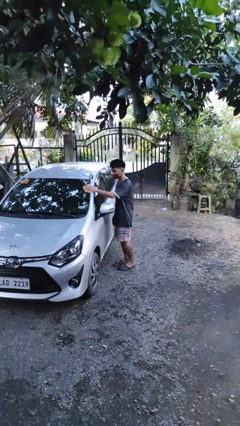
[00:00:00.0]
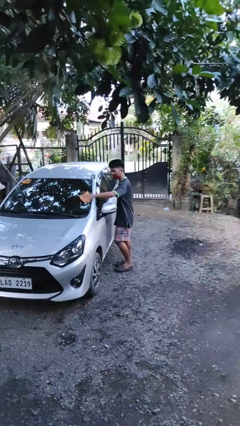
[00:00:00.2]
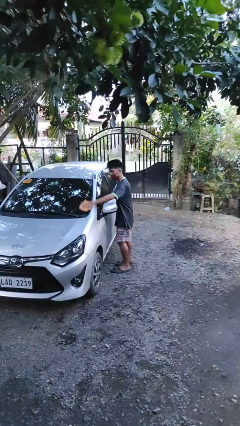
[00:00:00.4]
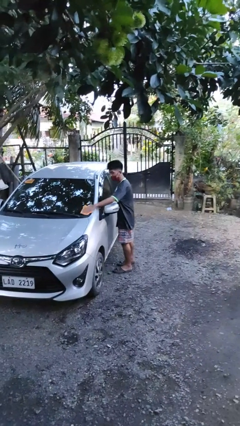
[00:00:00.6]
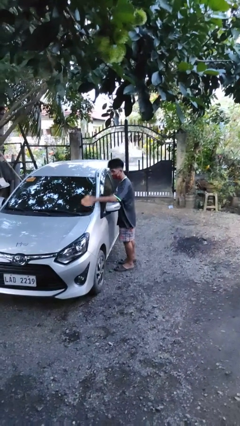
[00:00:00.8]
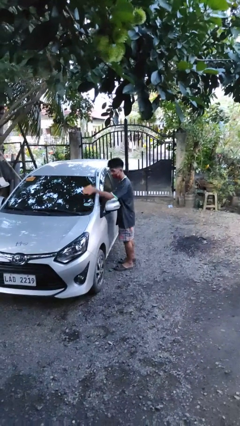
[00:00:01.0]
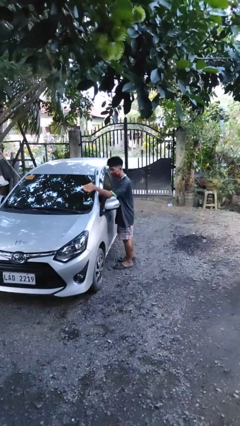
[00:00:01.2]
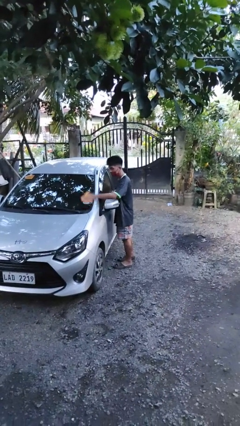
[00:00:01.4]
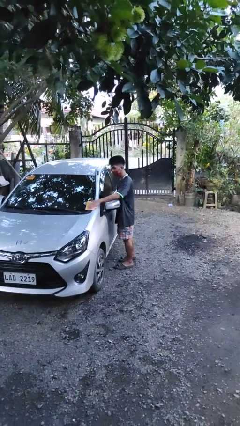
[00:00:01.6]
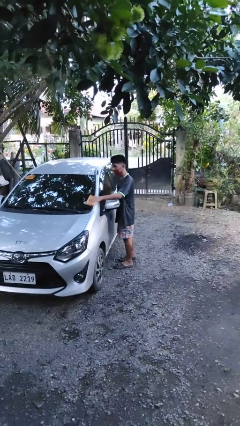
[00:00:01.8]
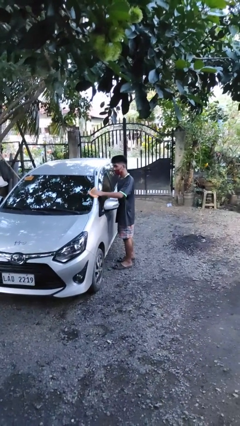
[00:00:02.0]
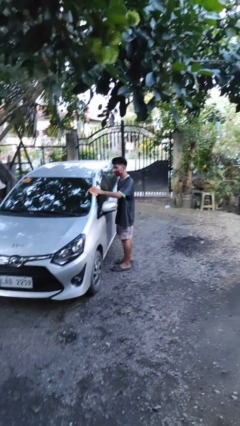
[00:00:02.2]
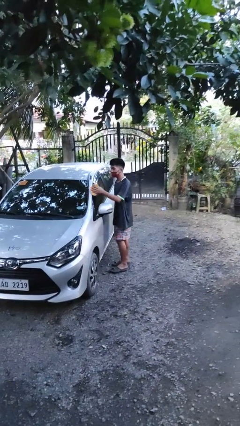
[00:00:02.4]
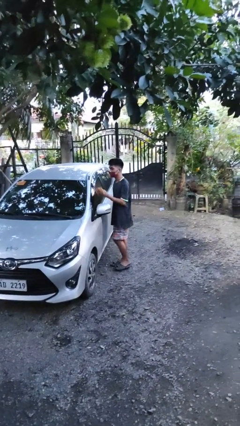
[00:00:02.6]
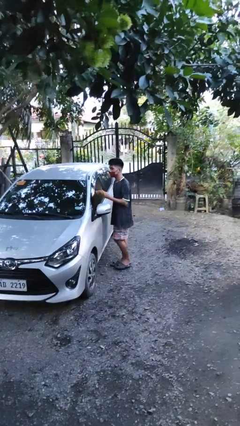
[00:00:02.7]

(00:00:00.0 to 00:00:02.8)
person polishes car with rag

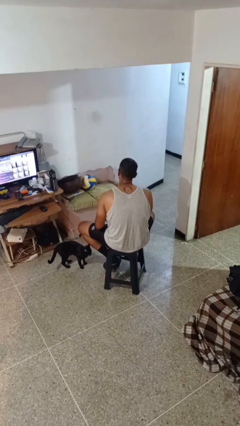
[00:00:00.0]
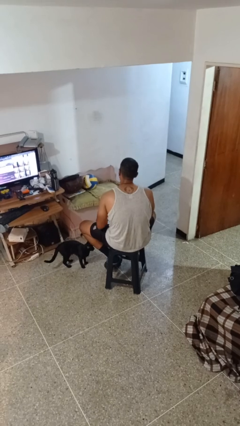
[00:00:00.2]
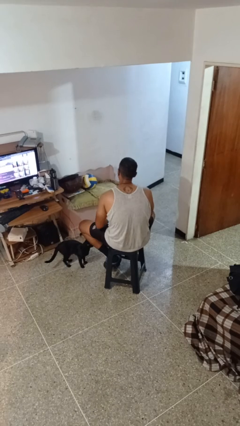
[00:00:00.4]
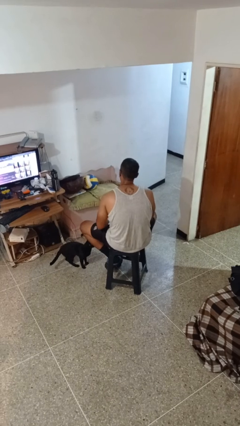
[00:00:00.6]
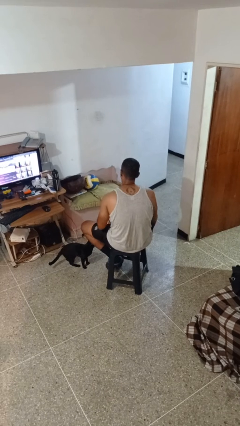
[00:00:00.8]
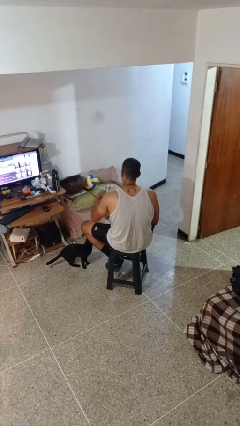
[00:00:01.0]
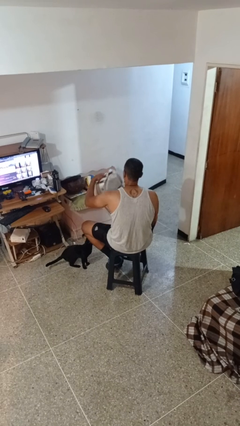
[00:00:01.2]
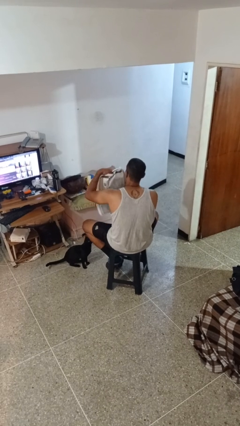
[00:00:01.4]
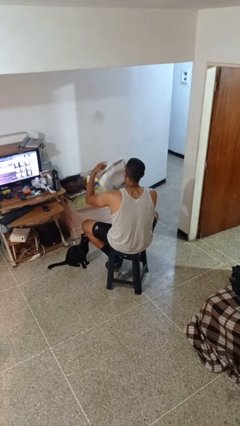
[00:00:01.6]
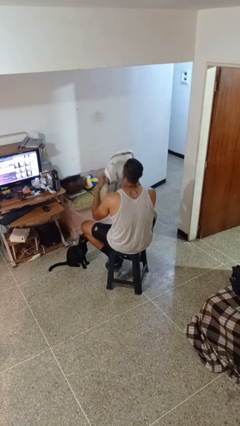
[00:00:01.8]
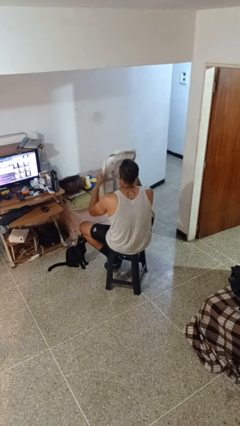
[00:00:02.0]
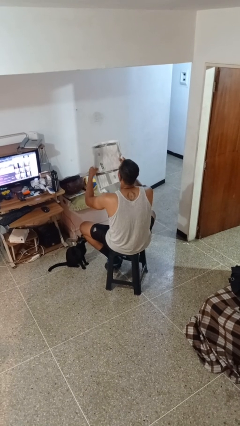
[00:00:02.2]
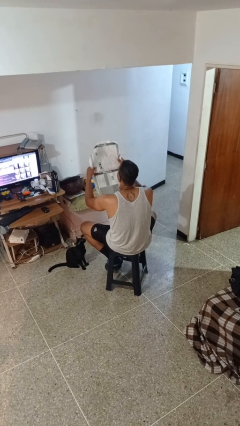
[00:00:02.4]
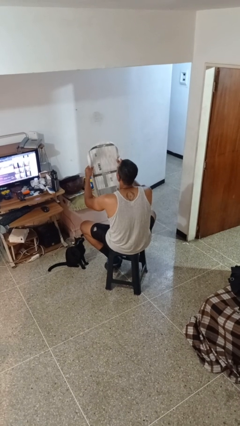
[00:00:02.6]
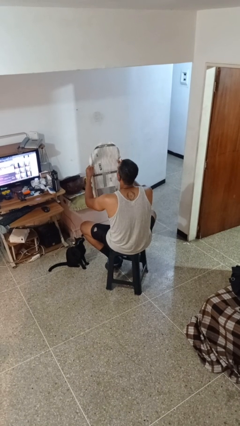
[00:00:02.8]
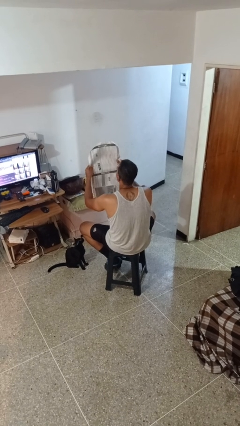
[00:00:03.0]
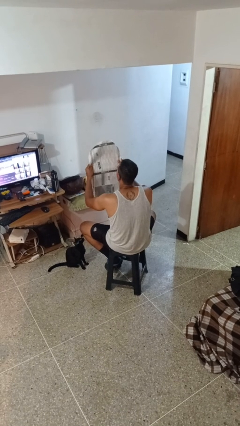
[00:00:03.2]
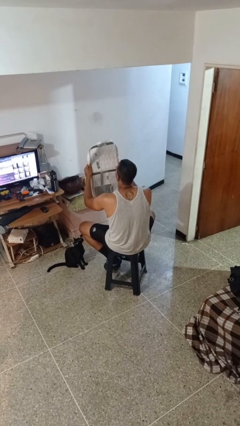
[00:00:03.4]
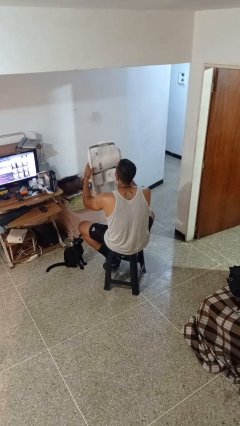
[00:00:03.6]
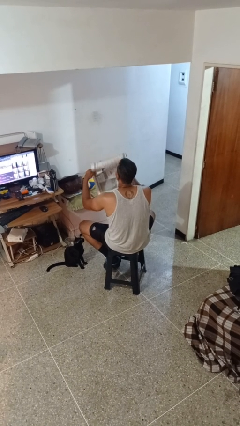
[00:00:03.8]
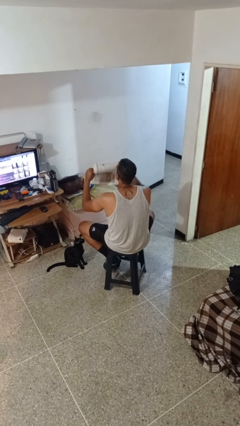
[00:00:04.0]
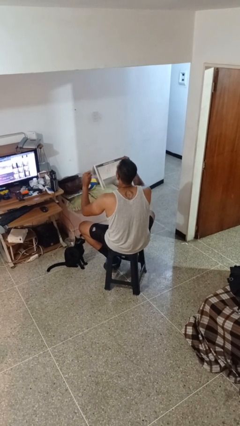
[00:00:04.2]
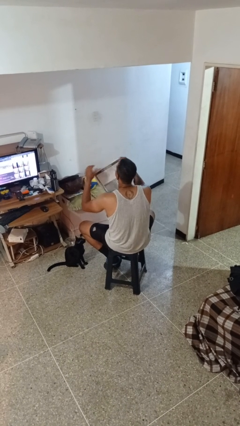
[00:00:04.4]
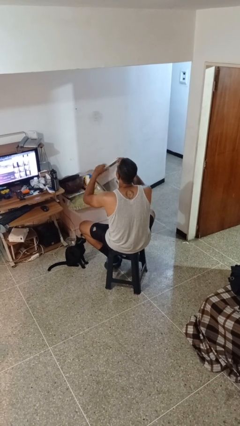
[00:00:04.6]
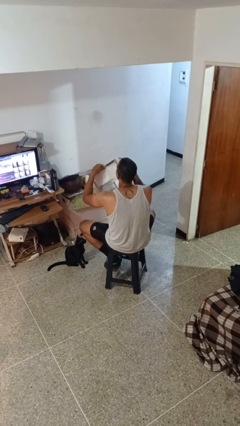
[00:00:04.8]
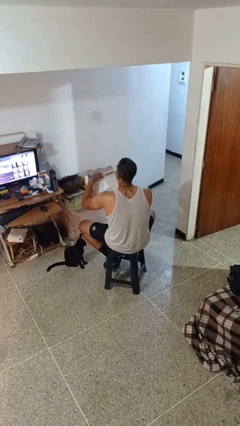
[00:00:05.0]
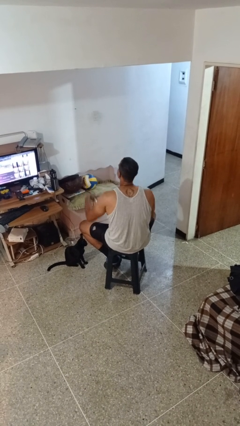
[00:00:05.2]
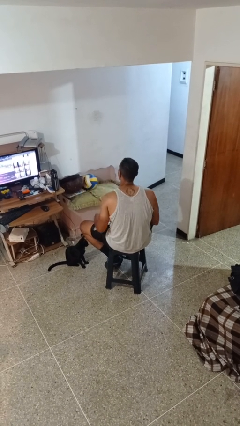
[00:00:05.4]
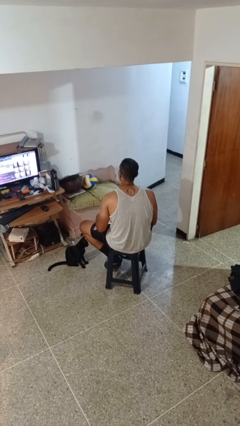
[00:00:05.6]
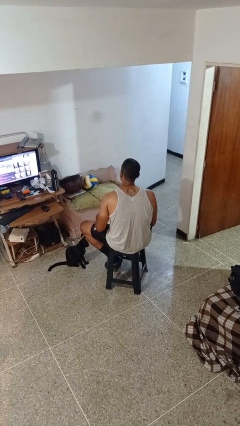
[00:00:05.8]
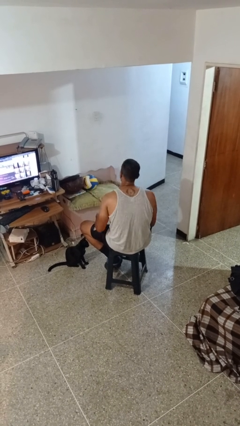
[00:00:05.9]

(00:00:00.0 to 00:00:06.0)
person reads newspaper

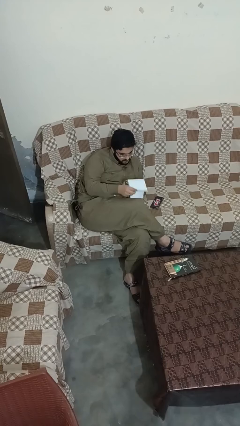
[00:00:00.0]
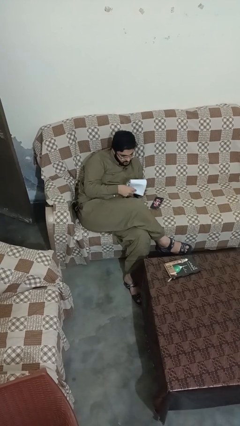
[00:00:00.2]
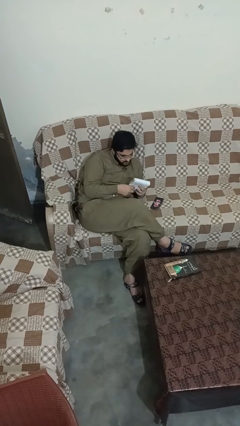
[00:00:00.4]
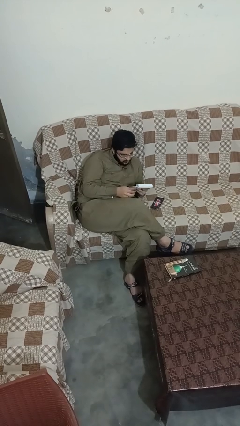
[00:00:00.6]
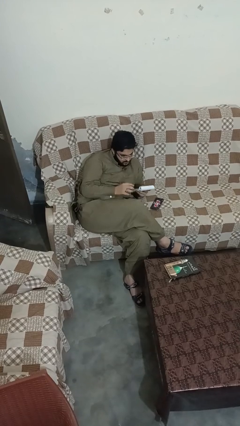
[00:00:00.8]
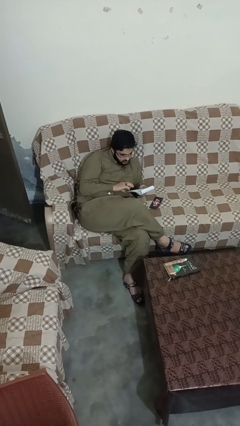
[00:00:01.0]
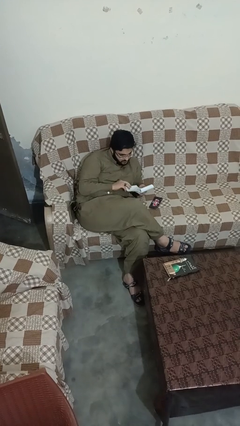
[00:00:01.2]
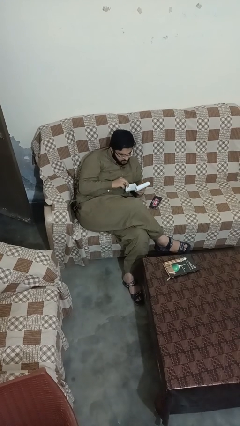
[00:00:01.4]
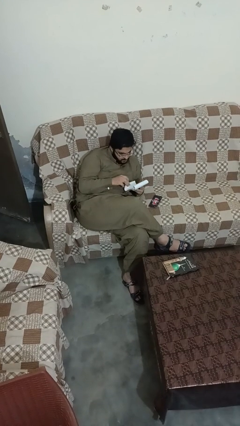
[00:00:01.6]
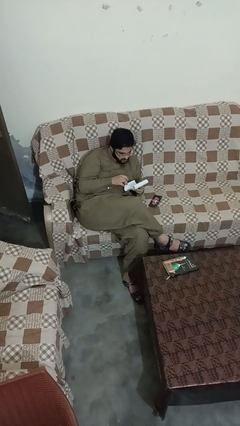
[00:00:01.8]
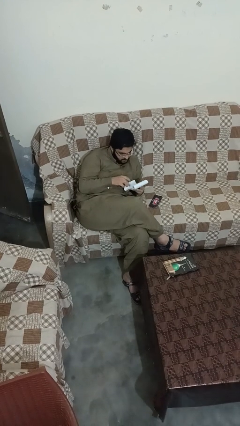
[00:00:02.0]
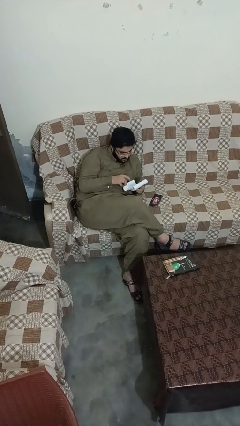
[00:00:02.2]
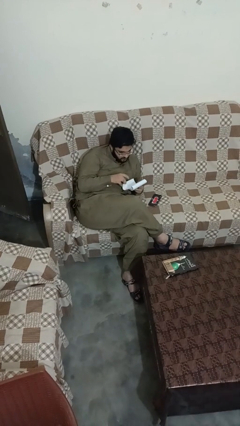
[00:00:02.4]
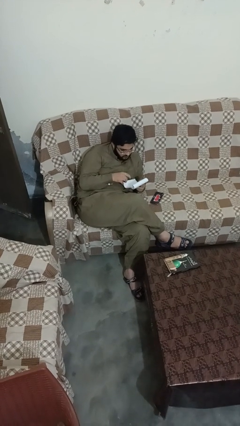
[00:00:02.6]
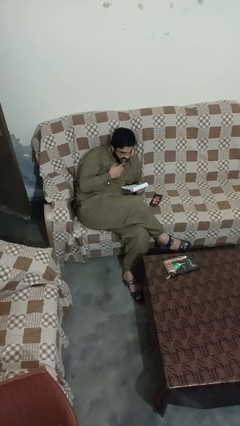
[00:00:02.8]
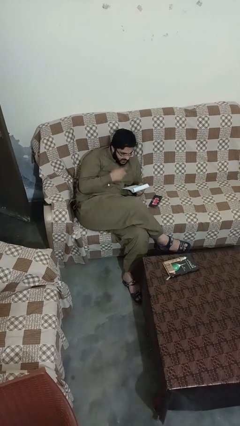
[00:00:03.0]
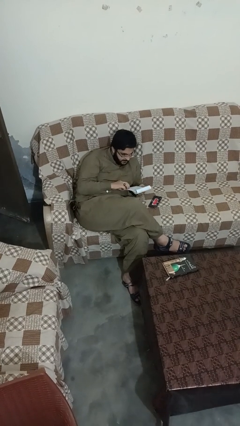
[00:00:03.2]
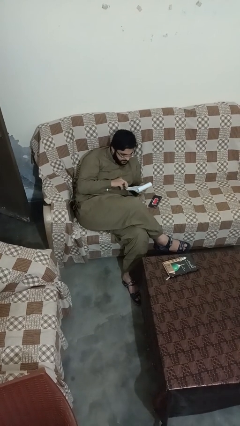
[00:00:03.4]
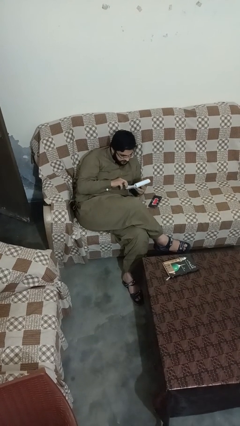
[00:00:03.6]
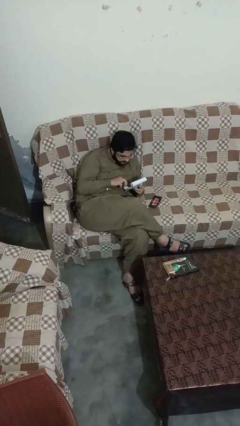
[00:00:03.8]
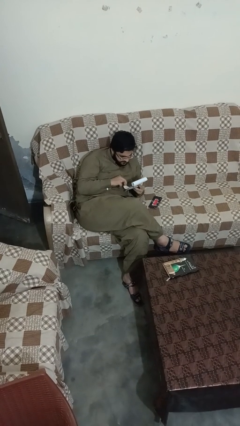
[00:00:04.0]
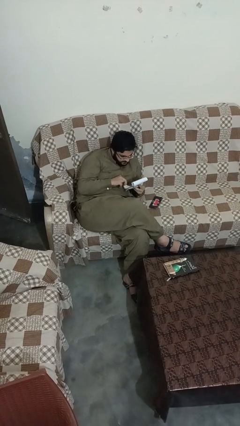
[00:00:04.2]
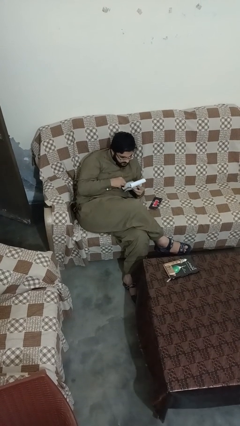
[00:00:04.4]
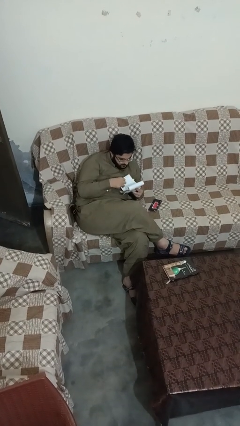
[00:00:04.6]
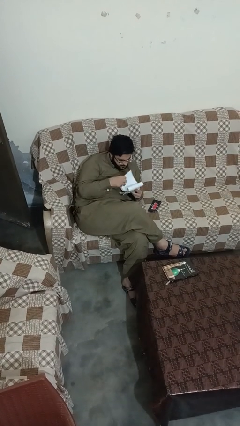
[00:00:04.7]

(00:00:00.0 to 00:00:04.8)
person reads magazine

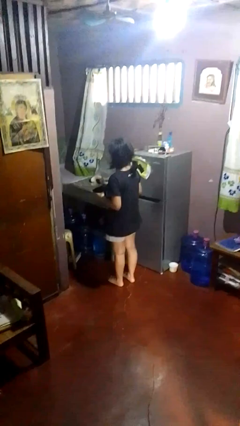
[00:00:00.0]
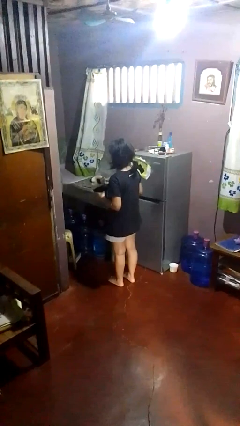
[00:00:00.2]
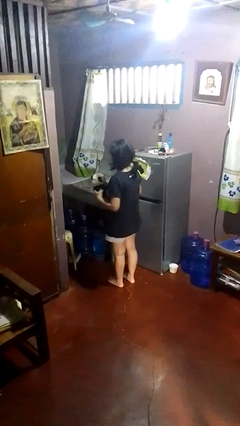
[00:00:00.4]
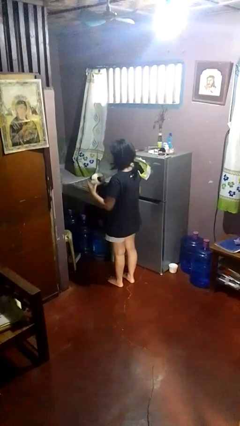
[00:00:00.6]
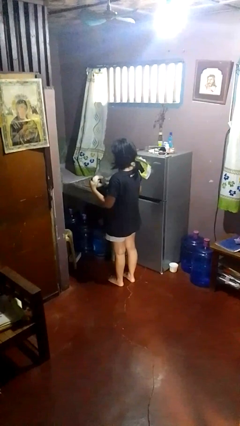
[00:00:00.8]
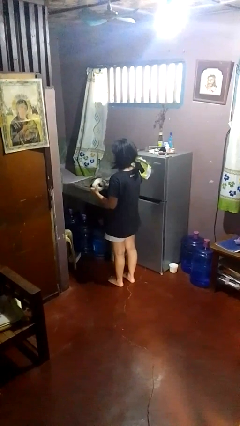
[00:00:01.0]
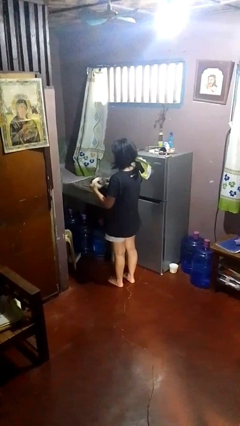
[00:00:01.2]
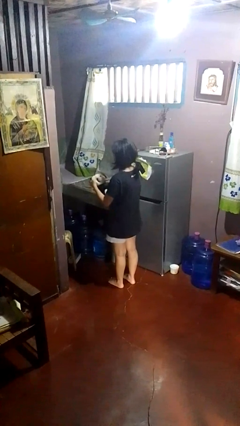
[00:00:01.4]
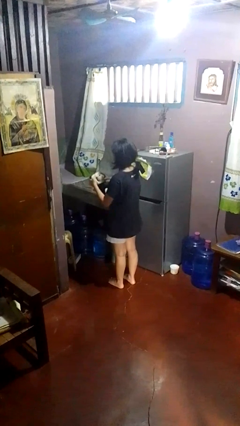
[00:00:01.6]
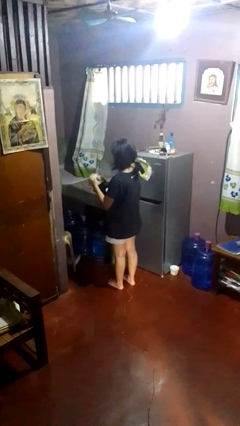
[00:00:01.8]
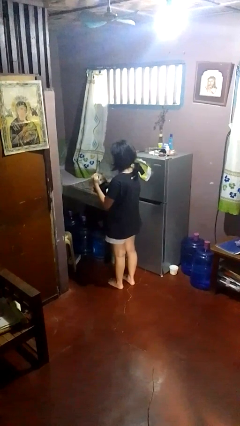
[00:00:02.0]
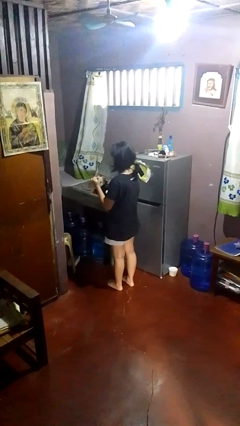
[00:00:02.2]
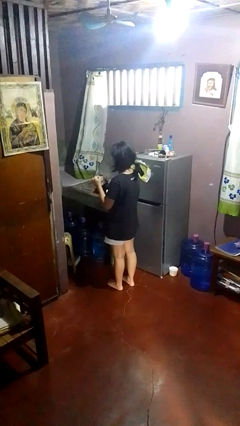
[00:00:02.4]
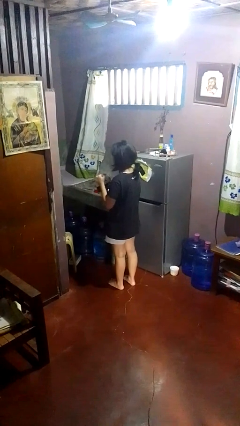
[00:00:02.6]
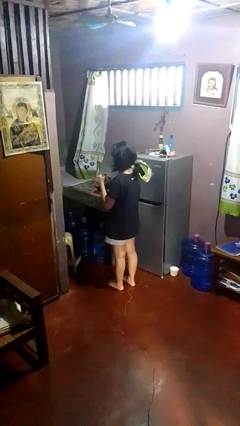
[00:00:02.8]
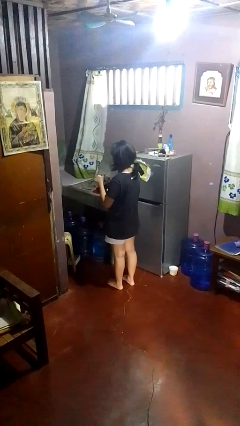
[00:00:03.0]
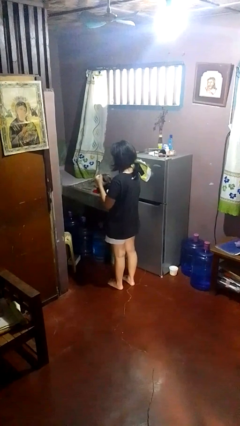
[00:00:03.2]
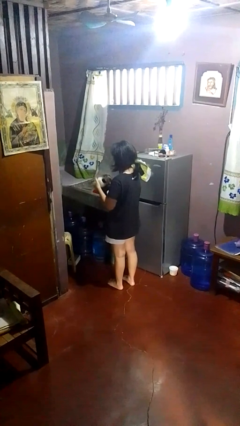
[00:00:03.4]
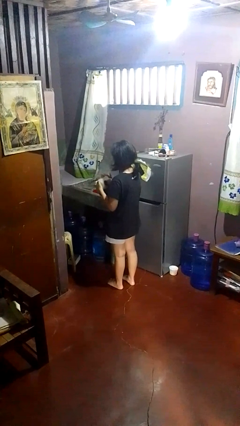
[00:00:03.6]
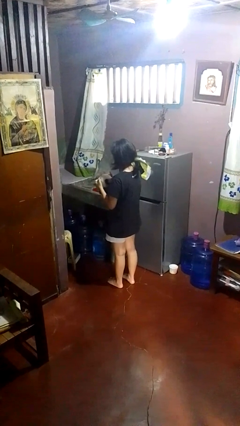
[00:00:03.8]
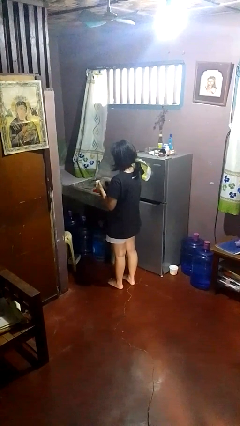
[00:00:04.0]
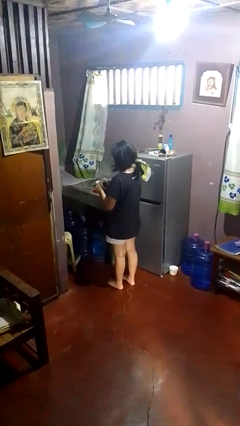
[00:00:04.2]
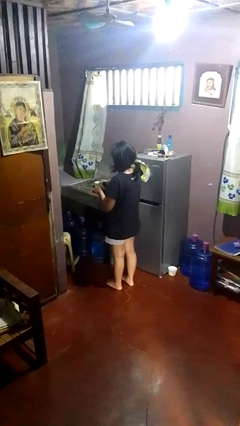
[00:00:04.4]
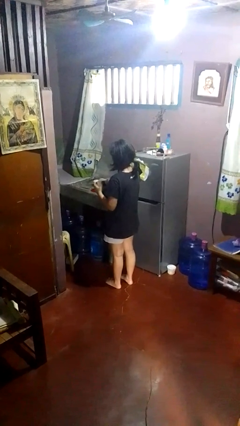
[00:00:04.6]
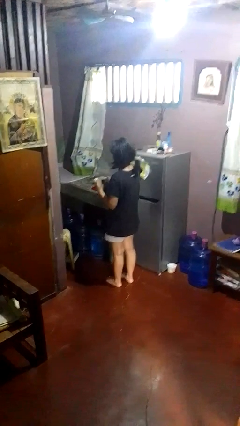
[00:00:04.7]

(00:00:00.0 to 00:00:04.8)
person squeezes object
